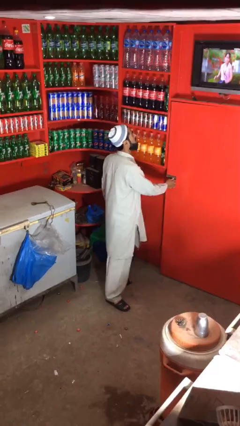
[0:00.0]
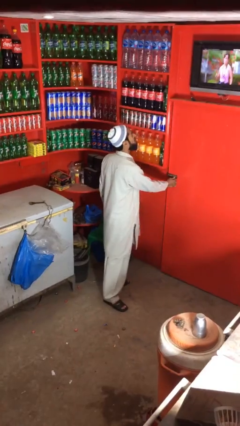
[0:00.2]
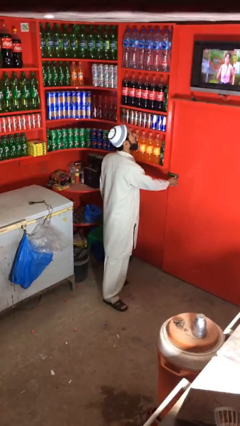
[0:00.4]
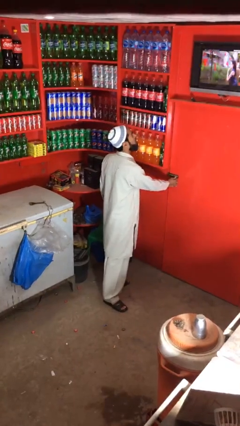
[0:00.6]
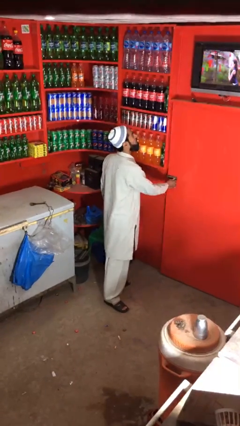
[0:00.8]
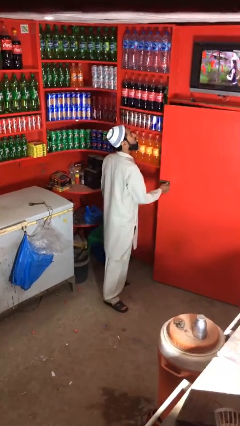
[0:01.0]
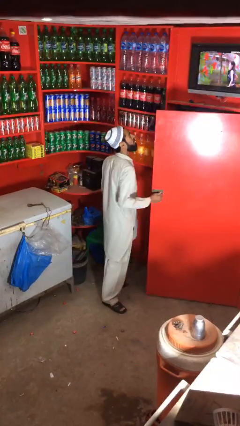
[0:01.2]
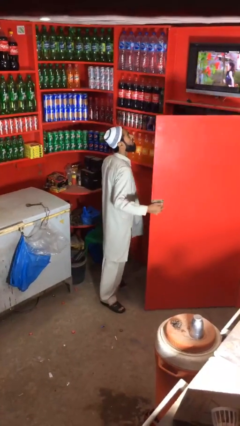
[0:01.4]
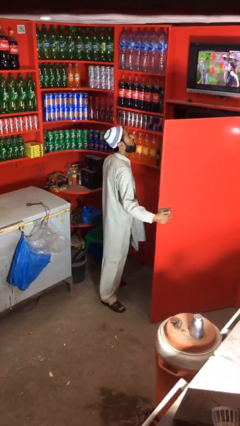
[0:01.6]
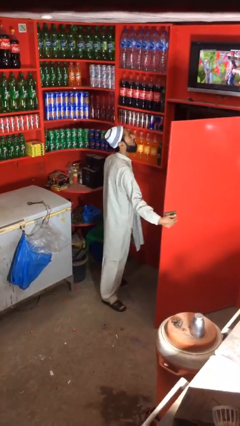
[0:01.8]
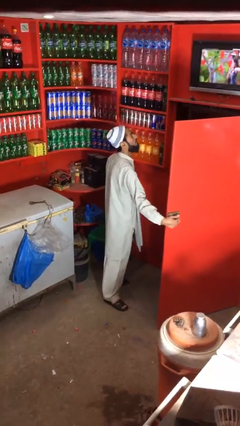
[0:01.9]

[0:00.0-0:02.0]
person opens facility door

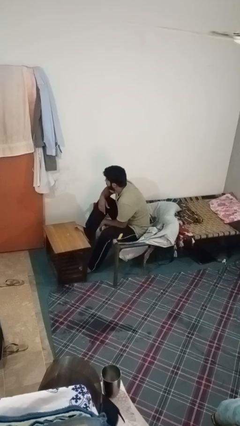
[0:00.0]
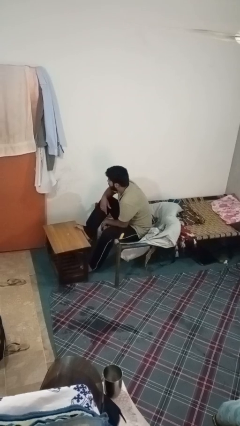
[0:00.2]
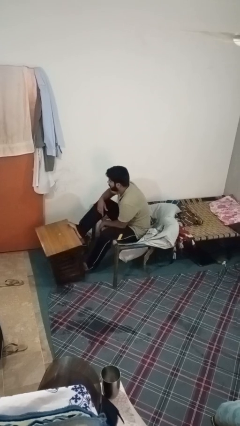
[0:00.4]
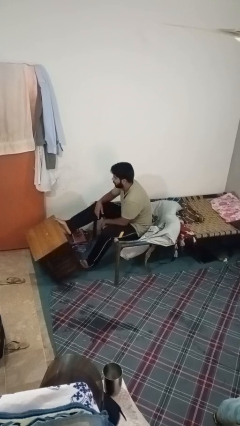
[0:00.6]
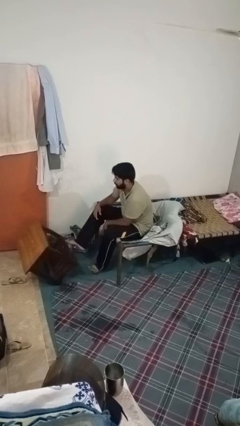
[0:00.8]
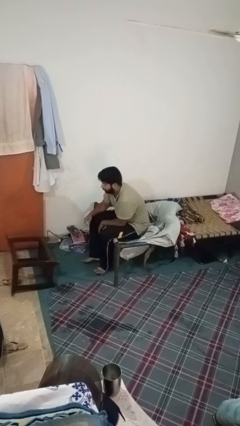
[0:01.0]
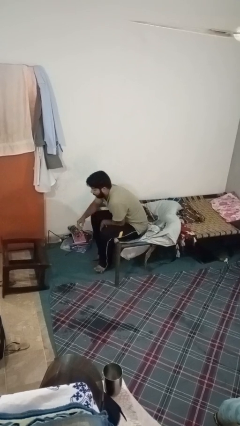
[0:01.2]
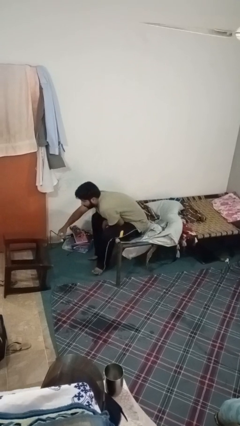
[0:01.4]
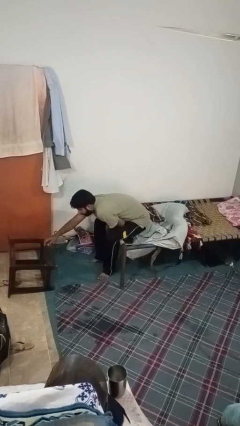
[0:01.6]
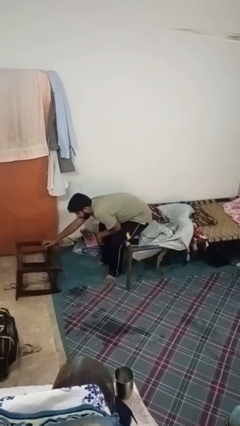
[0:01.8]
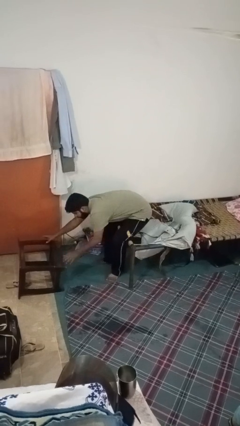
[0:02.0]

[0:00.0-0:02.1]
person knocks over furniture

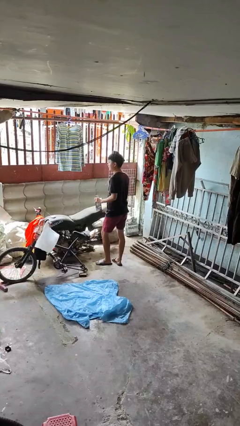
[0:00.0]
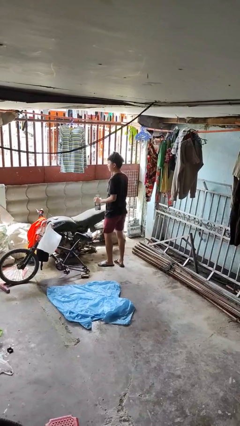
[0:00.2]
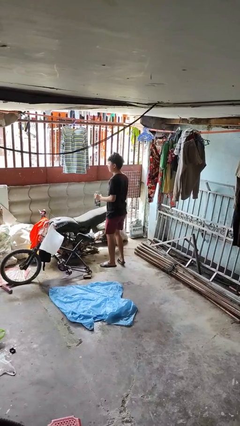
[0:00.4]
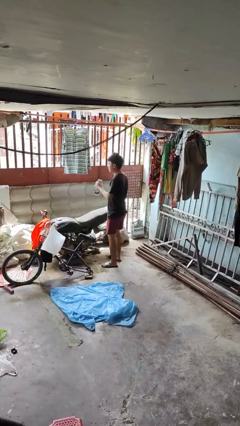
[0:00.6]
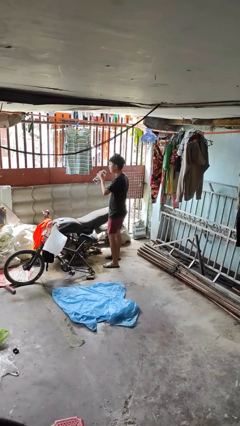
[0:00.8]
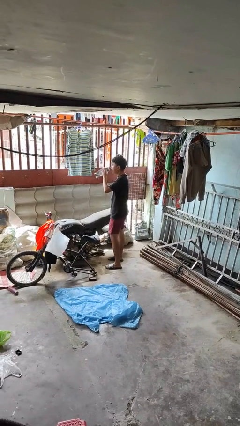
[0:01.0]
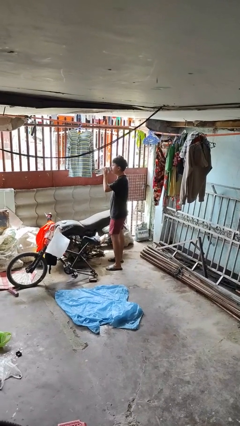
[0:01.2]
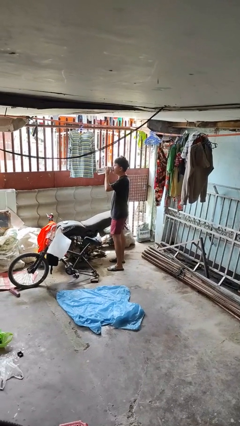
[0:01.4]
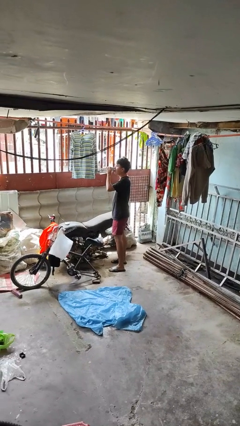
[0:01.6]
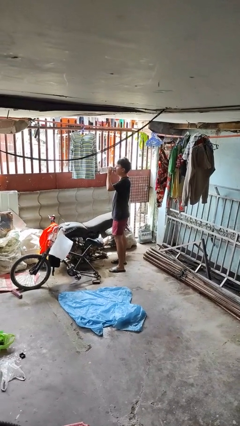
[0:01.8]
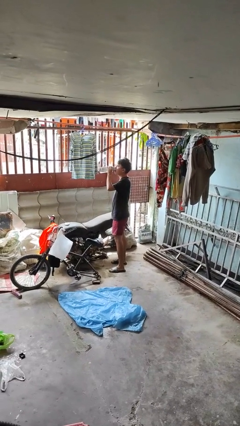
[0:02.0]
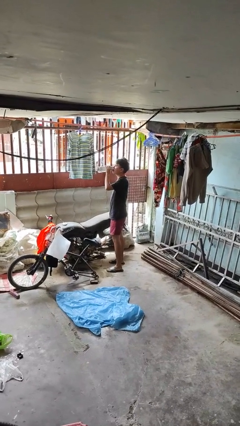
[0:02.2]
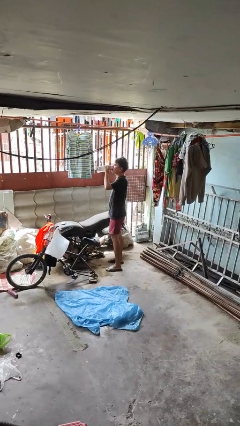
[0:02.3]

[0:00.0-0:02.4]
person drinks from bottle

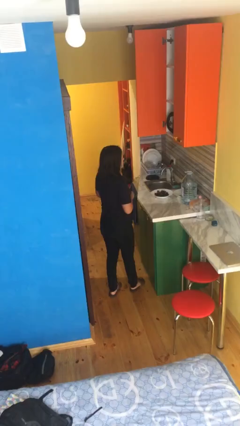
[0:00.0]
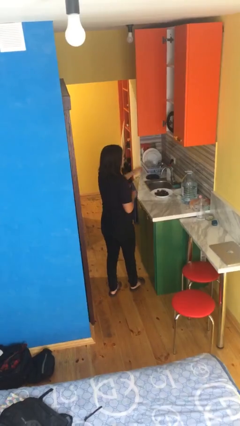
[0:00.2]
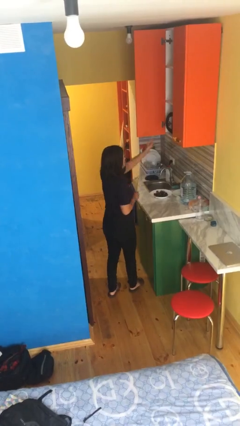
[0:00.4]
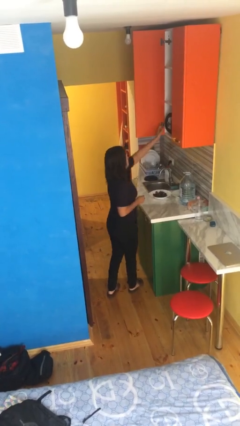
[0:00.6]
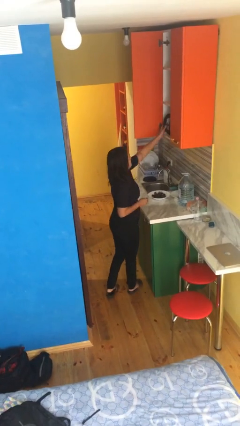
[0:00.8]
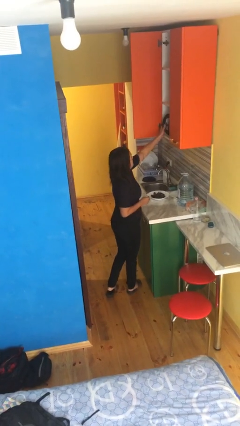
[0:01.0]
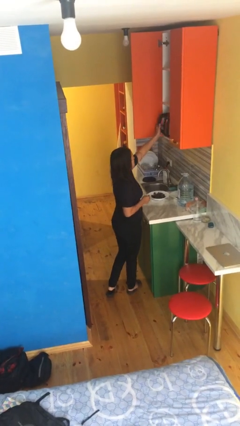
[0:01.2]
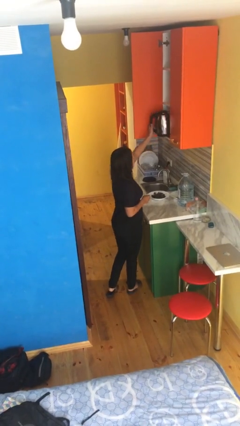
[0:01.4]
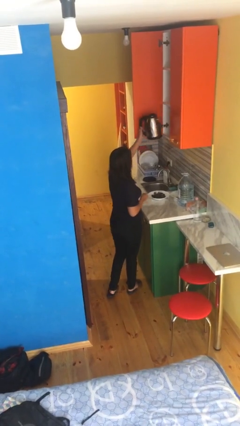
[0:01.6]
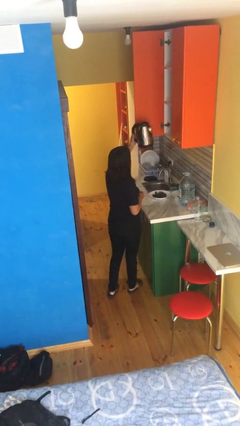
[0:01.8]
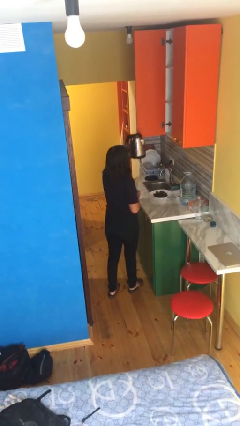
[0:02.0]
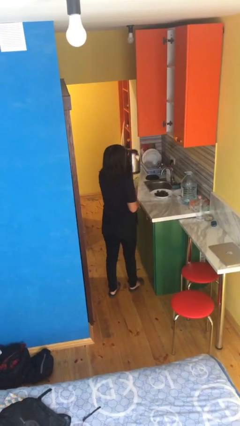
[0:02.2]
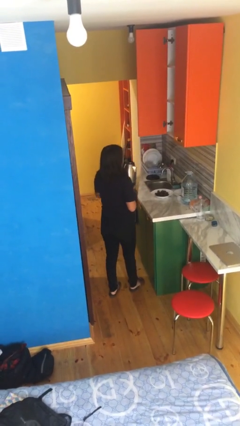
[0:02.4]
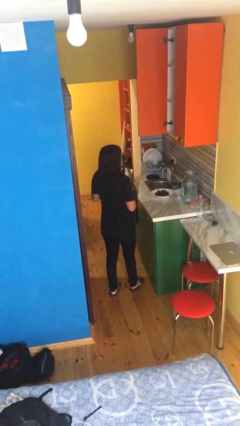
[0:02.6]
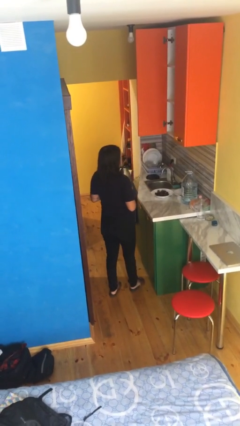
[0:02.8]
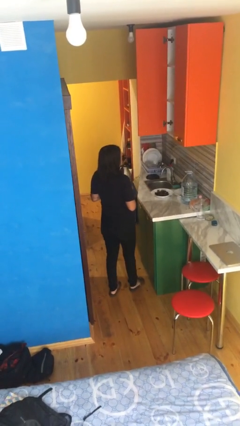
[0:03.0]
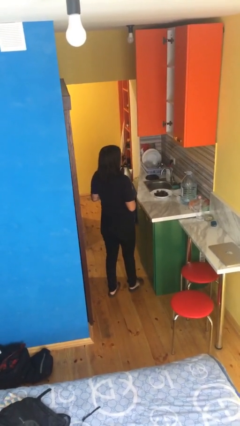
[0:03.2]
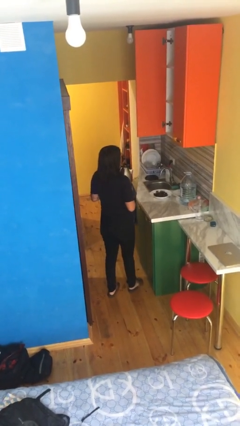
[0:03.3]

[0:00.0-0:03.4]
person picks up object from cabinet

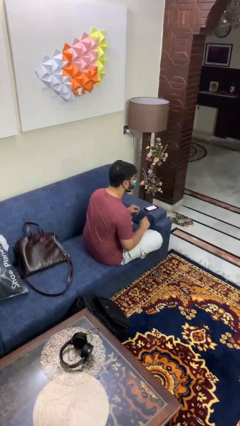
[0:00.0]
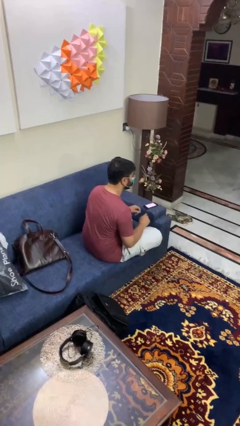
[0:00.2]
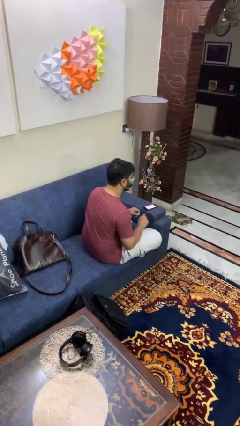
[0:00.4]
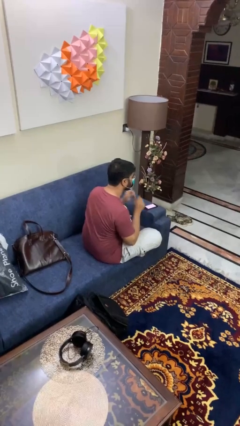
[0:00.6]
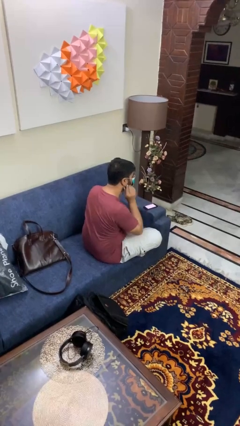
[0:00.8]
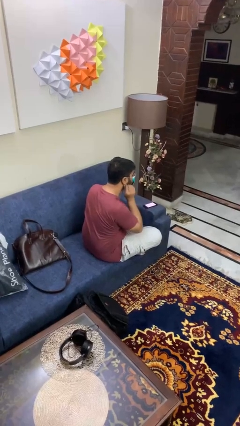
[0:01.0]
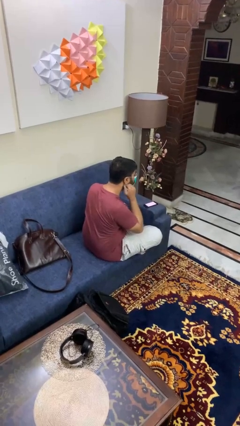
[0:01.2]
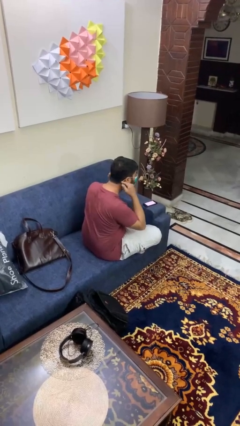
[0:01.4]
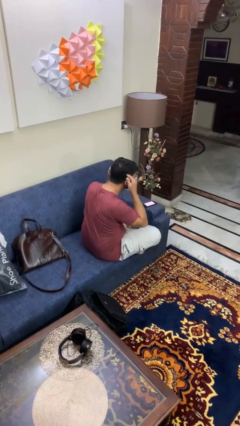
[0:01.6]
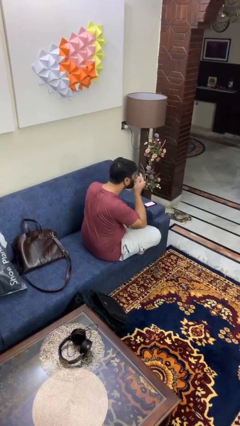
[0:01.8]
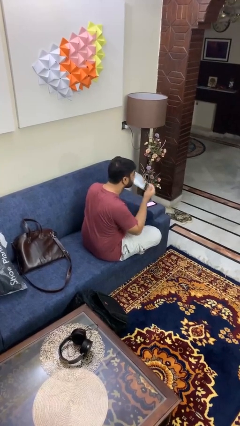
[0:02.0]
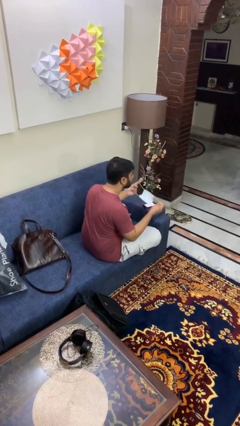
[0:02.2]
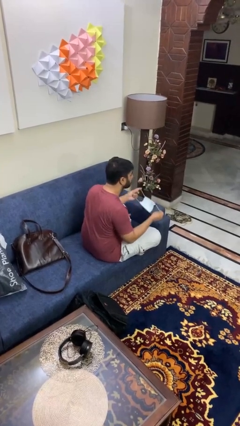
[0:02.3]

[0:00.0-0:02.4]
person takes off facemask

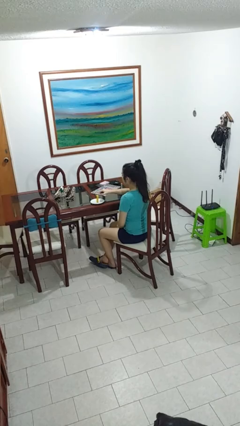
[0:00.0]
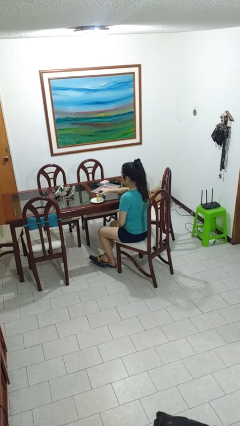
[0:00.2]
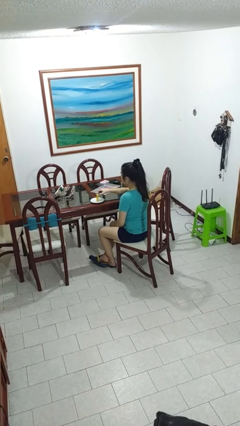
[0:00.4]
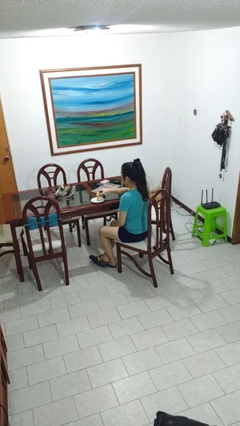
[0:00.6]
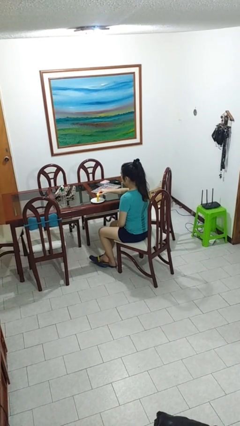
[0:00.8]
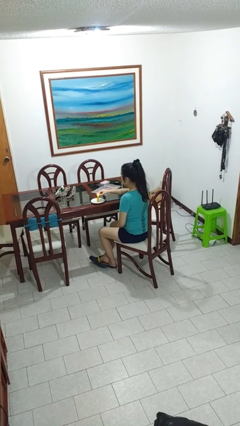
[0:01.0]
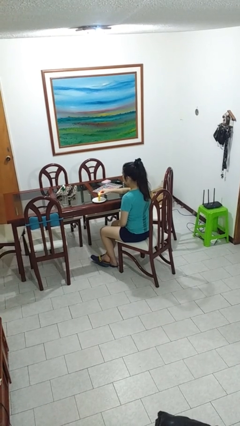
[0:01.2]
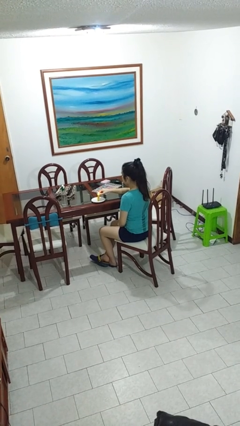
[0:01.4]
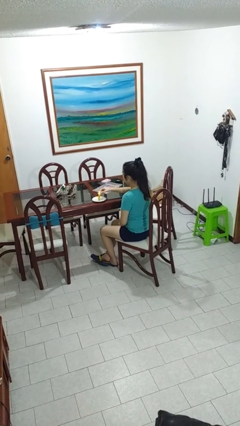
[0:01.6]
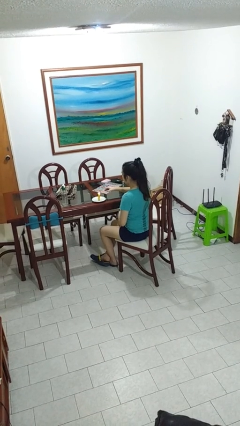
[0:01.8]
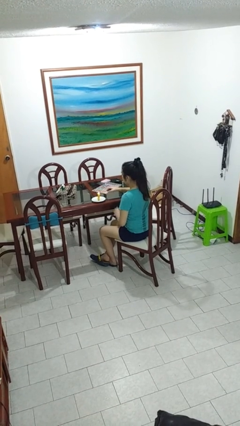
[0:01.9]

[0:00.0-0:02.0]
person lights candle

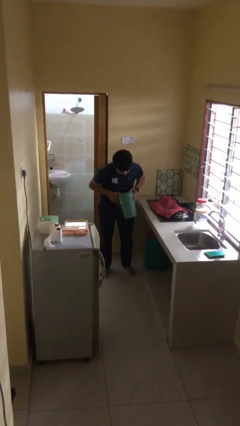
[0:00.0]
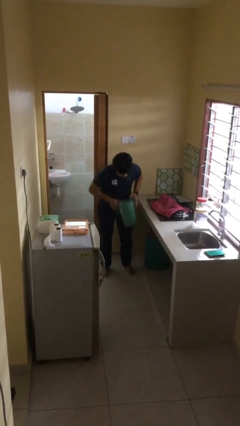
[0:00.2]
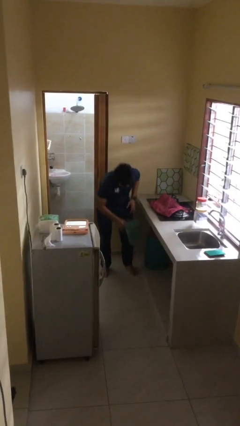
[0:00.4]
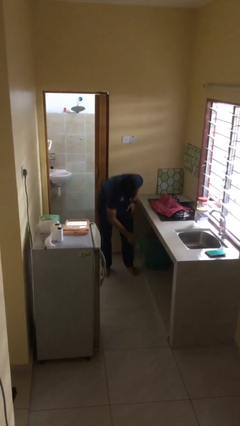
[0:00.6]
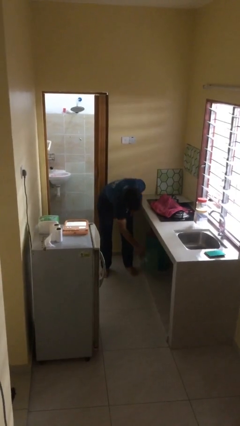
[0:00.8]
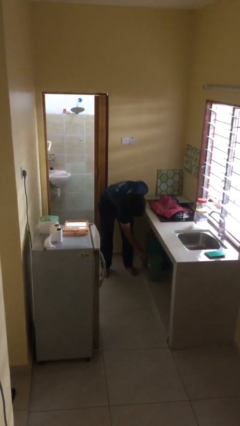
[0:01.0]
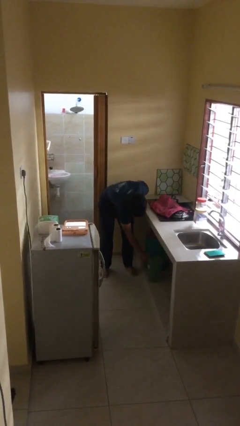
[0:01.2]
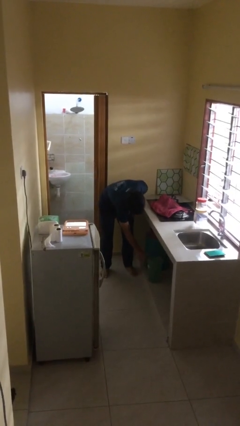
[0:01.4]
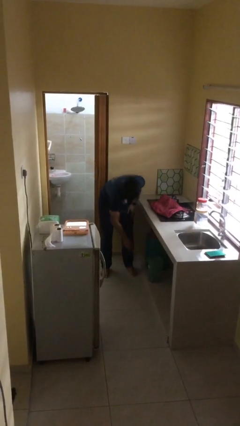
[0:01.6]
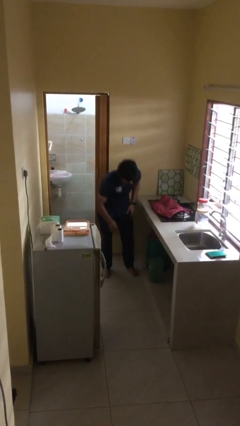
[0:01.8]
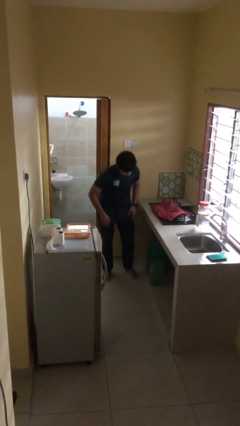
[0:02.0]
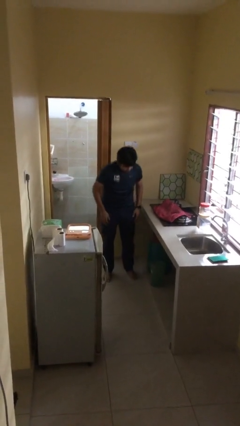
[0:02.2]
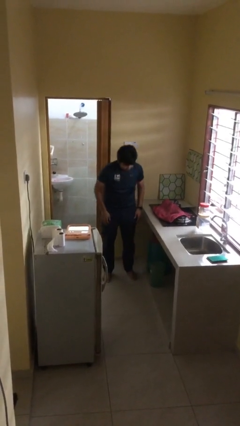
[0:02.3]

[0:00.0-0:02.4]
person puts down object into cabinet

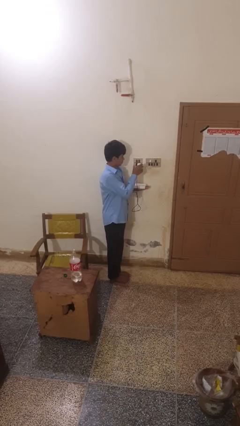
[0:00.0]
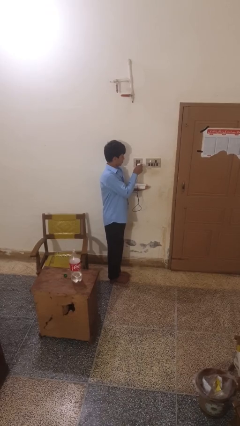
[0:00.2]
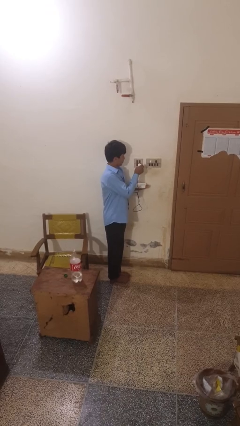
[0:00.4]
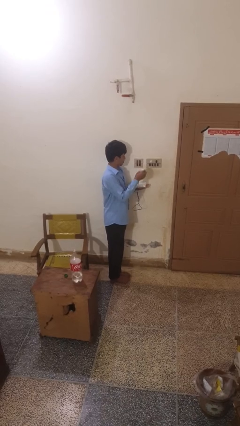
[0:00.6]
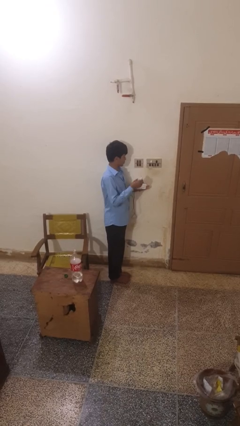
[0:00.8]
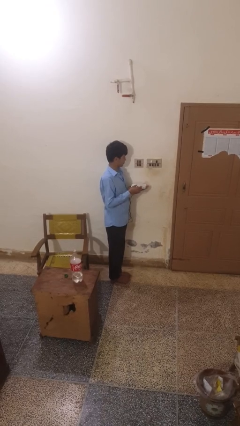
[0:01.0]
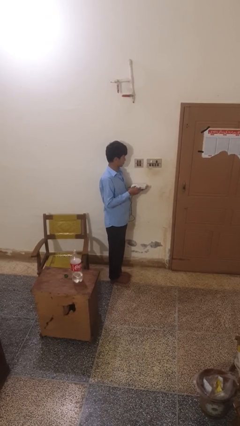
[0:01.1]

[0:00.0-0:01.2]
person unplugs from electrical socket
